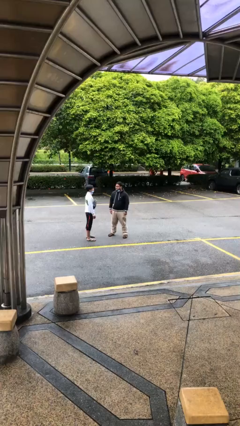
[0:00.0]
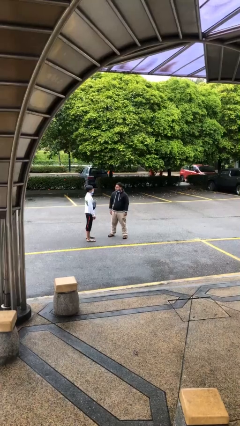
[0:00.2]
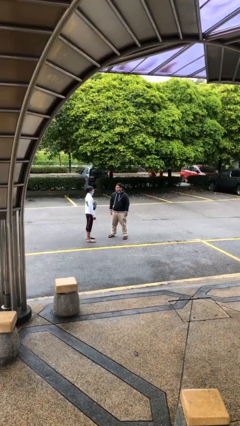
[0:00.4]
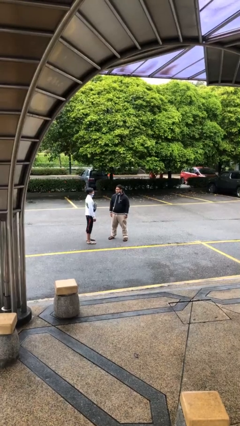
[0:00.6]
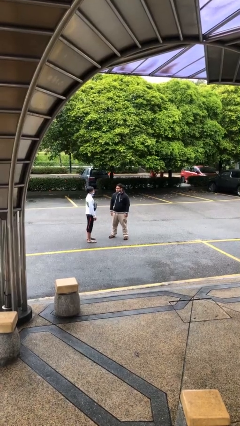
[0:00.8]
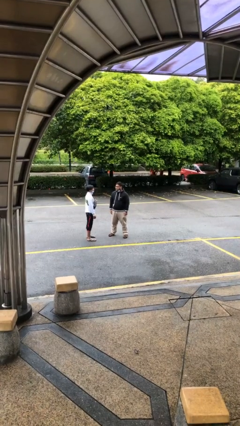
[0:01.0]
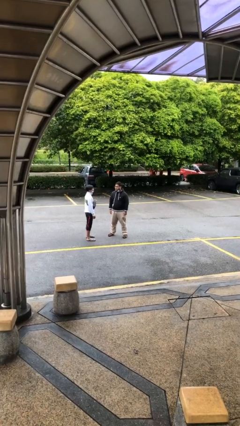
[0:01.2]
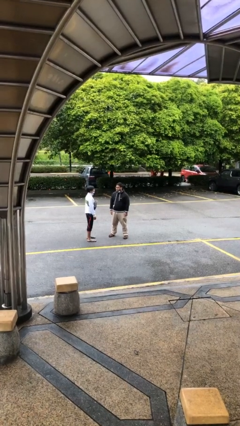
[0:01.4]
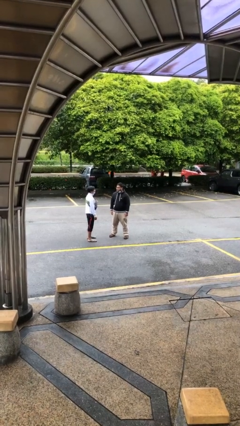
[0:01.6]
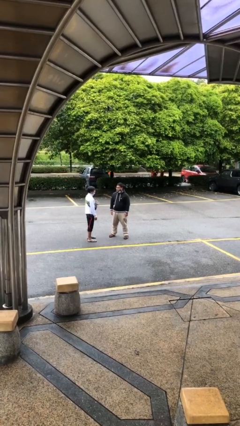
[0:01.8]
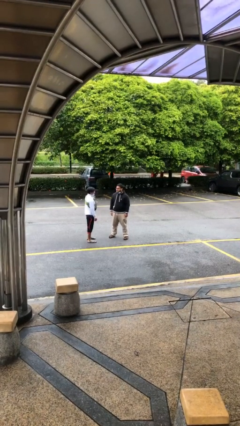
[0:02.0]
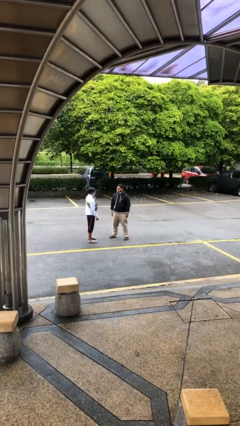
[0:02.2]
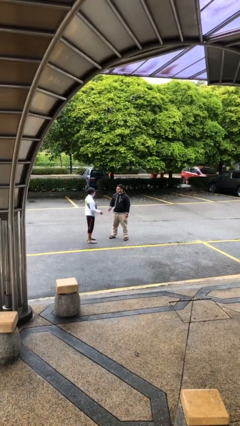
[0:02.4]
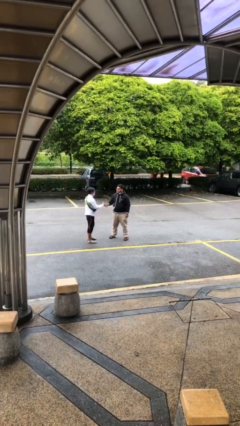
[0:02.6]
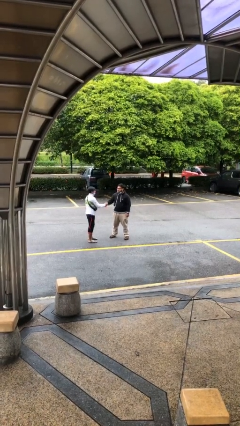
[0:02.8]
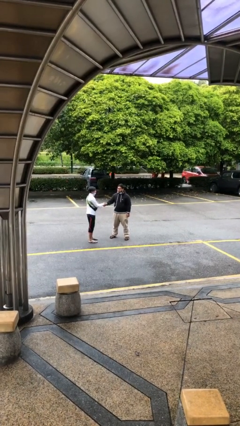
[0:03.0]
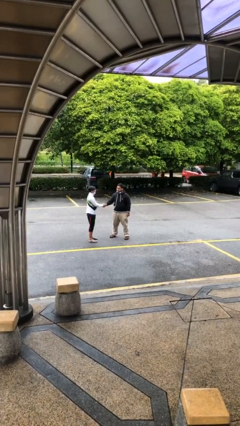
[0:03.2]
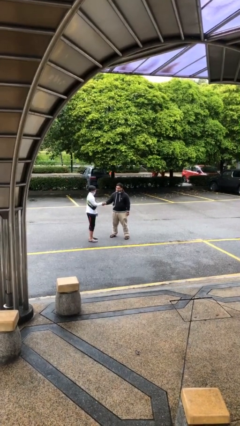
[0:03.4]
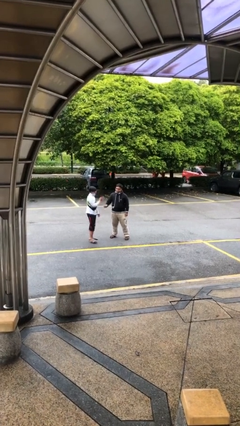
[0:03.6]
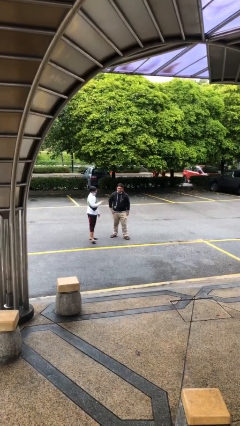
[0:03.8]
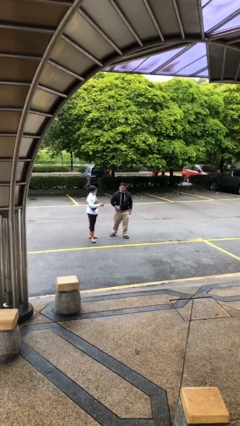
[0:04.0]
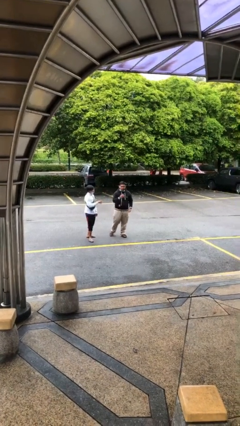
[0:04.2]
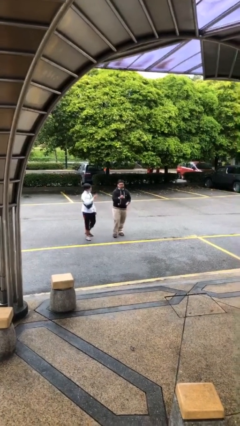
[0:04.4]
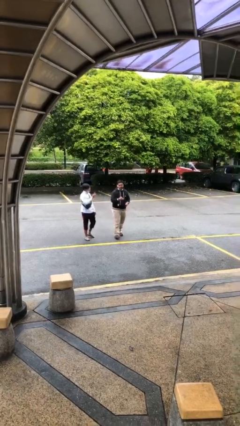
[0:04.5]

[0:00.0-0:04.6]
person shakes hand

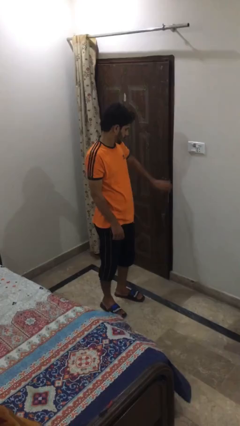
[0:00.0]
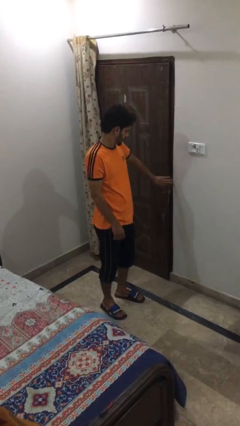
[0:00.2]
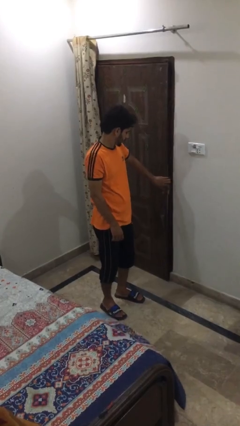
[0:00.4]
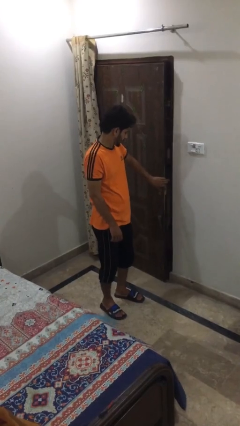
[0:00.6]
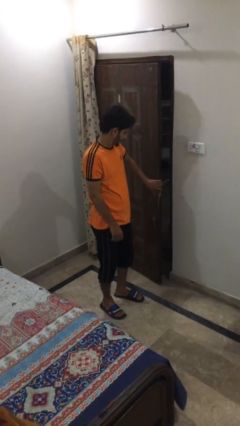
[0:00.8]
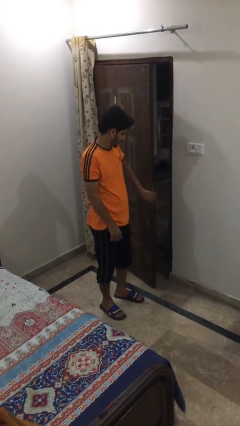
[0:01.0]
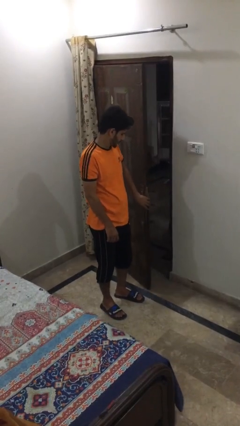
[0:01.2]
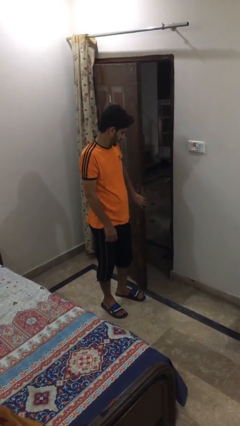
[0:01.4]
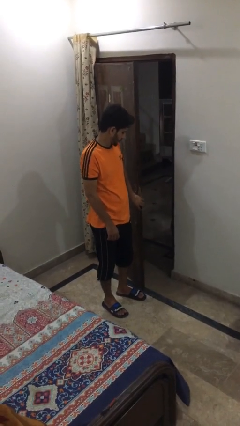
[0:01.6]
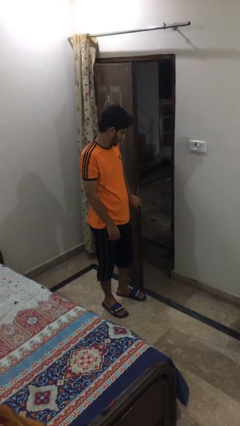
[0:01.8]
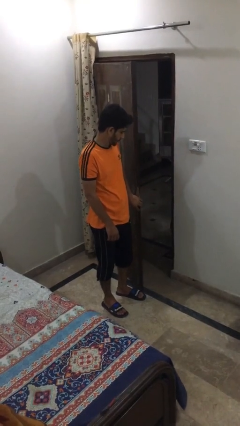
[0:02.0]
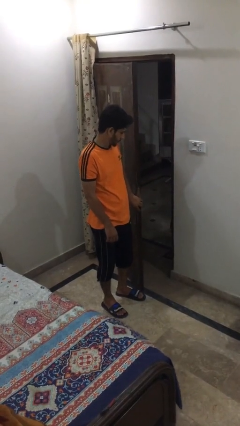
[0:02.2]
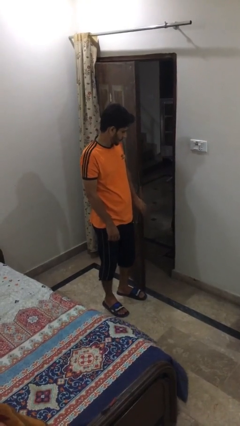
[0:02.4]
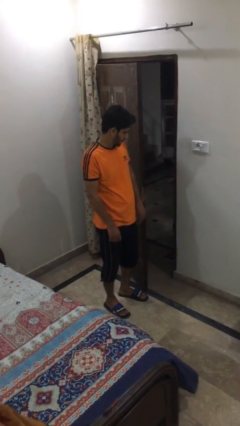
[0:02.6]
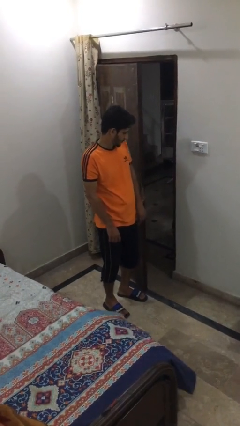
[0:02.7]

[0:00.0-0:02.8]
person opens facility door

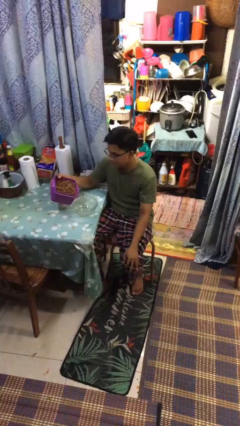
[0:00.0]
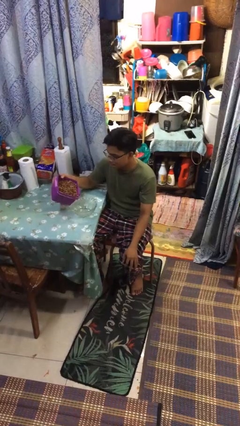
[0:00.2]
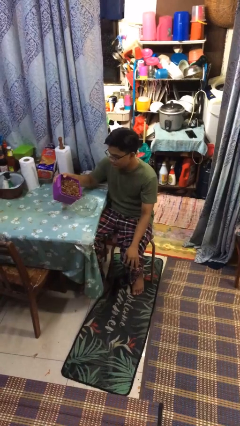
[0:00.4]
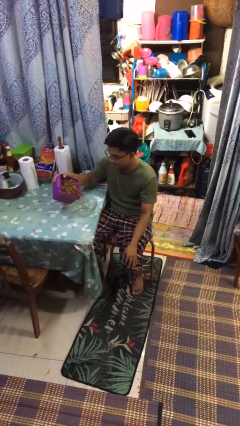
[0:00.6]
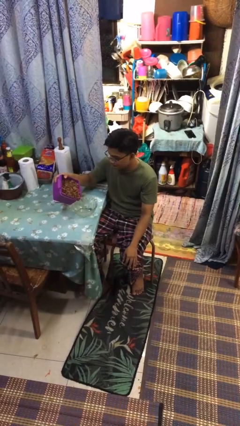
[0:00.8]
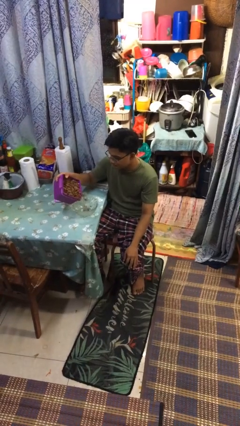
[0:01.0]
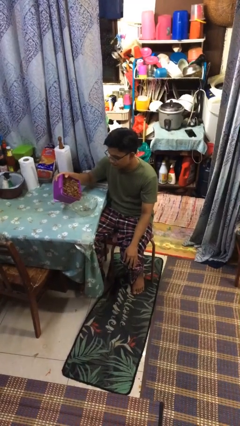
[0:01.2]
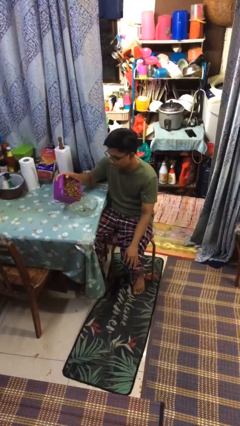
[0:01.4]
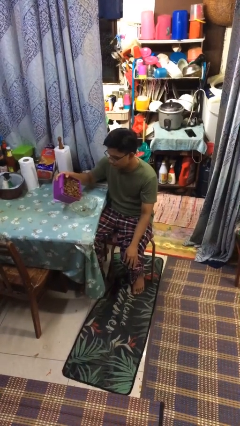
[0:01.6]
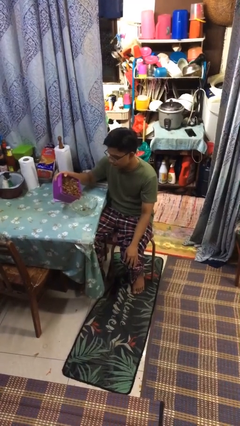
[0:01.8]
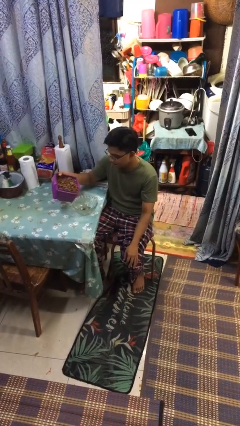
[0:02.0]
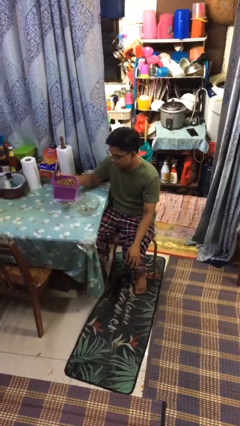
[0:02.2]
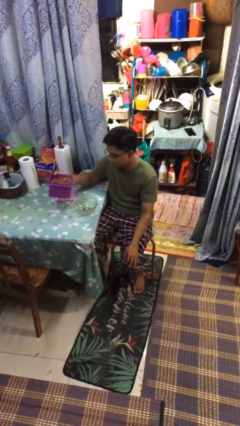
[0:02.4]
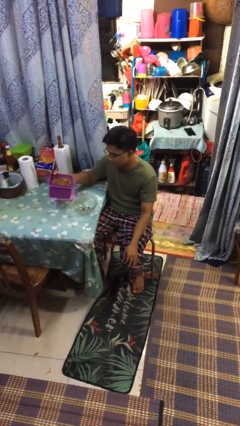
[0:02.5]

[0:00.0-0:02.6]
person pours into bowl

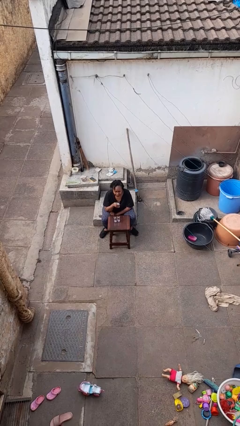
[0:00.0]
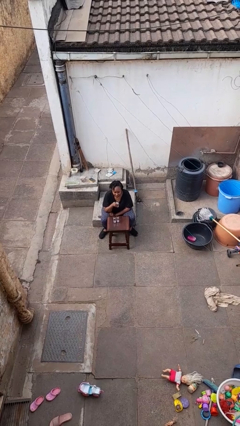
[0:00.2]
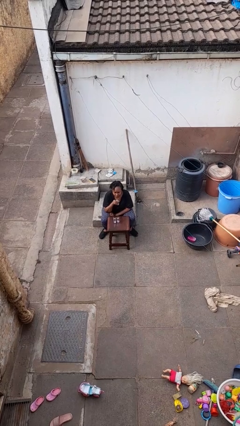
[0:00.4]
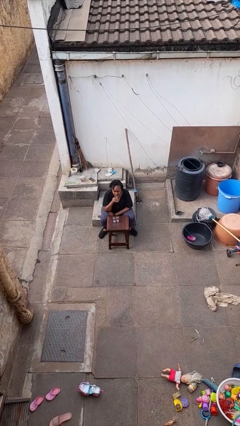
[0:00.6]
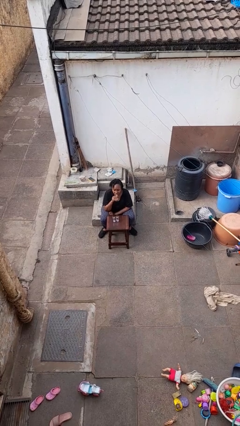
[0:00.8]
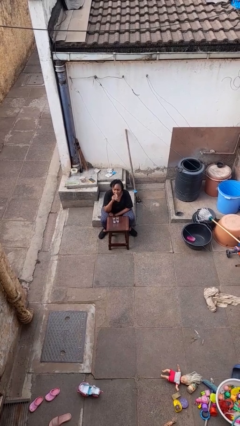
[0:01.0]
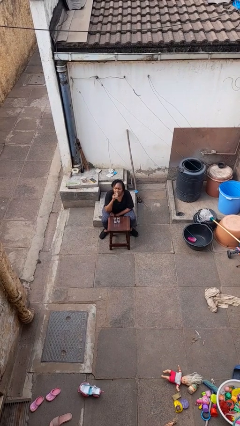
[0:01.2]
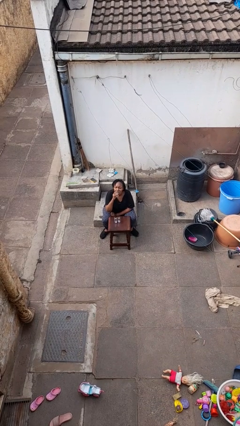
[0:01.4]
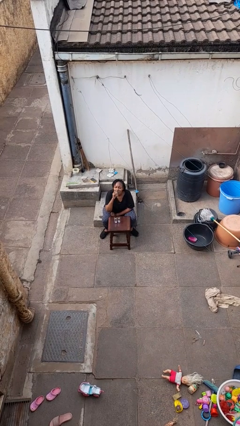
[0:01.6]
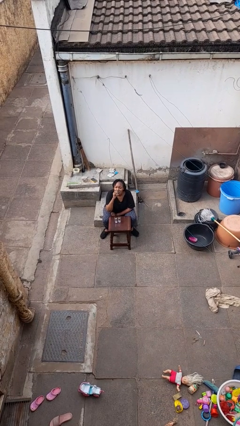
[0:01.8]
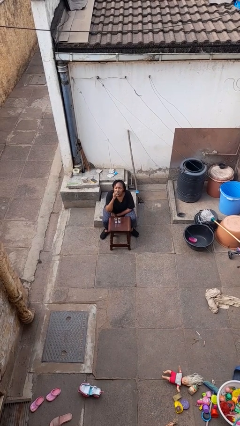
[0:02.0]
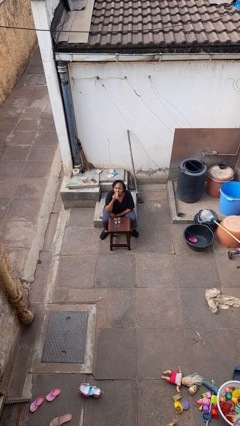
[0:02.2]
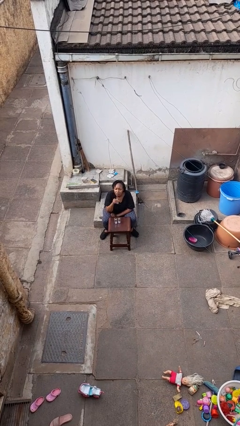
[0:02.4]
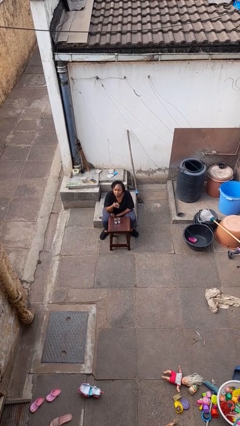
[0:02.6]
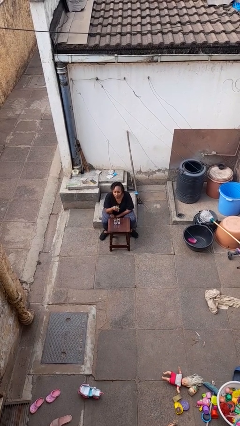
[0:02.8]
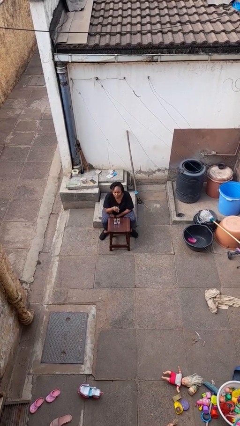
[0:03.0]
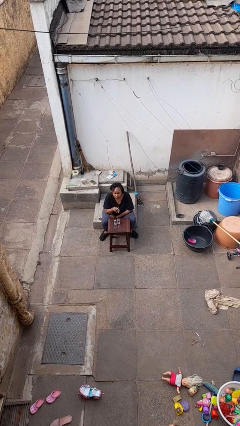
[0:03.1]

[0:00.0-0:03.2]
person drinks from shotglass

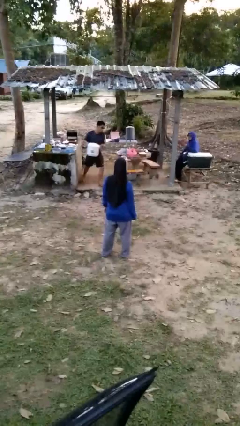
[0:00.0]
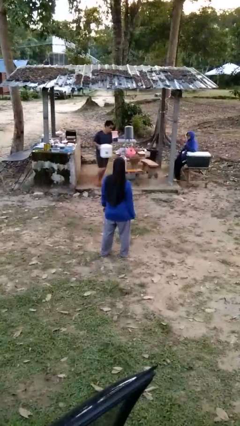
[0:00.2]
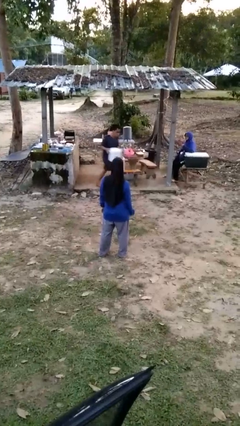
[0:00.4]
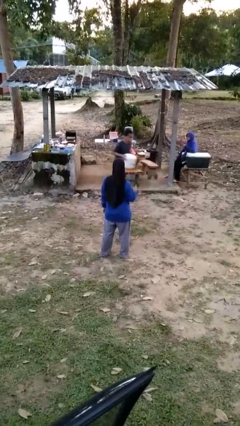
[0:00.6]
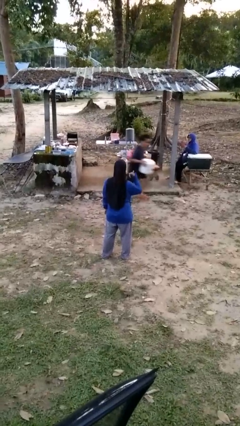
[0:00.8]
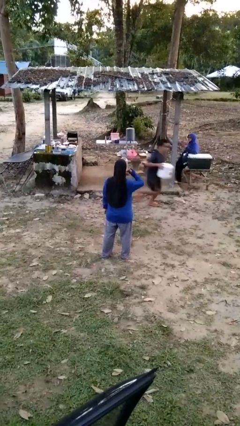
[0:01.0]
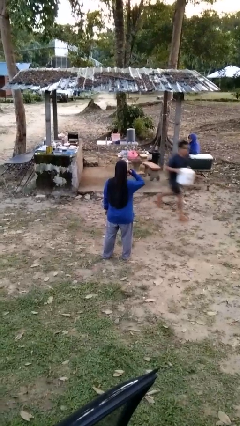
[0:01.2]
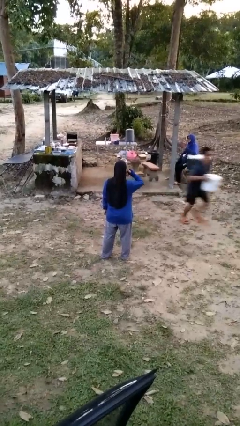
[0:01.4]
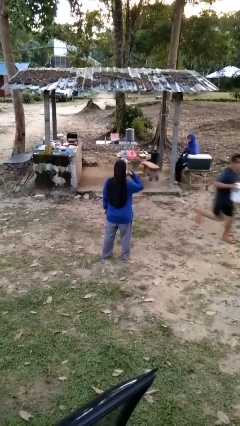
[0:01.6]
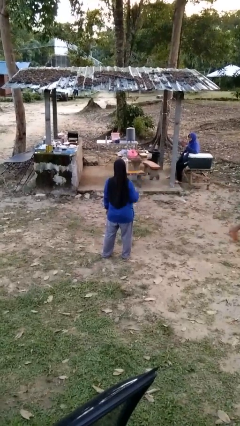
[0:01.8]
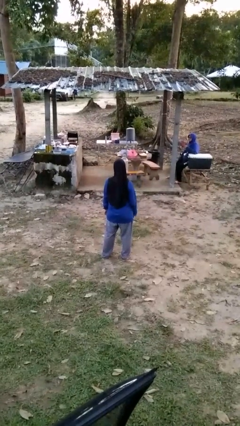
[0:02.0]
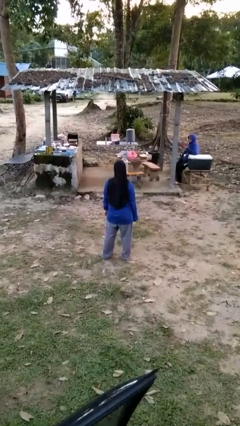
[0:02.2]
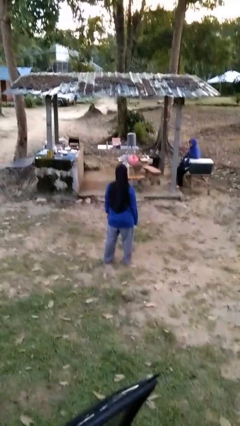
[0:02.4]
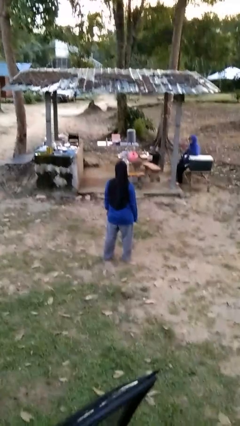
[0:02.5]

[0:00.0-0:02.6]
person gestures call me

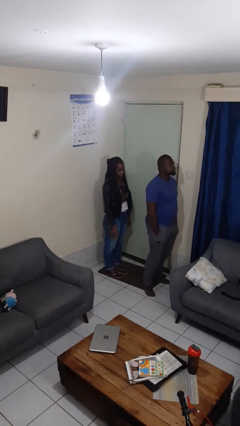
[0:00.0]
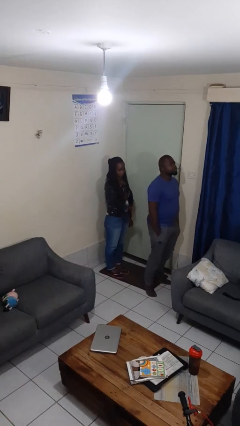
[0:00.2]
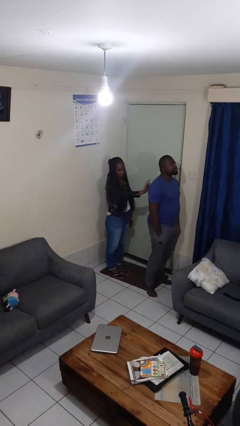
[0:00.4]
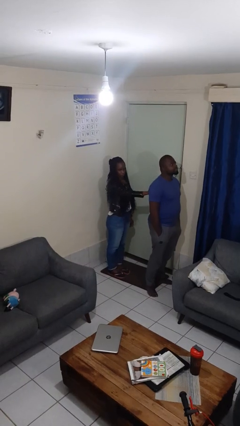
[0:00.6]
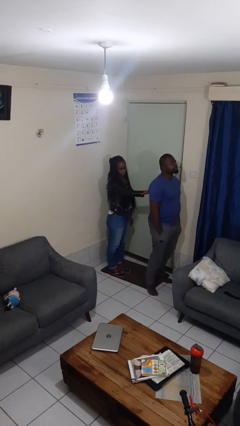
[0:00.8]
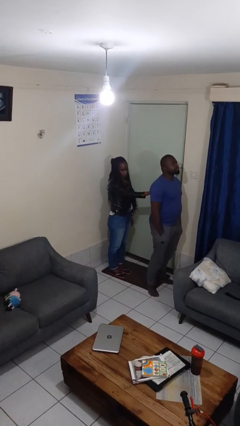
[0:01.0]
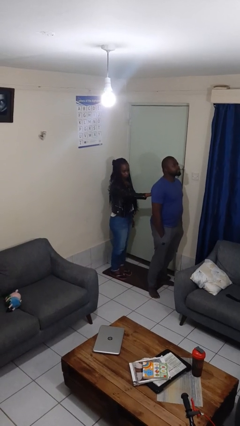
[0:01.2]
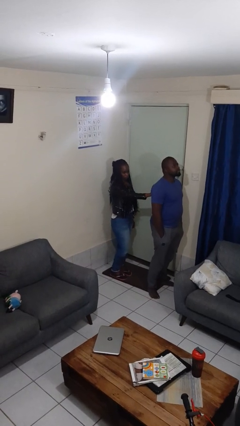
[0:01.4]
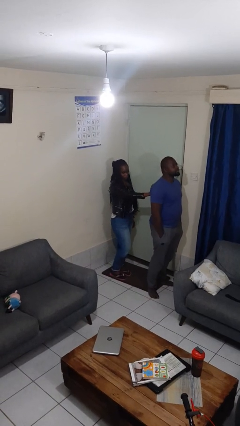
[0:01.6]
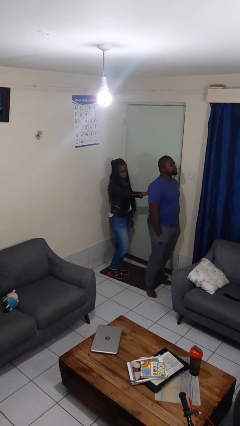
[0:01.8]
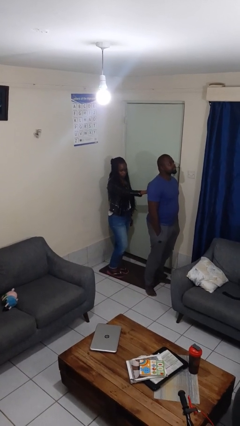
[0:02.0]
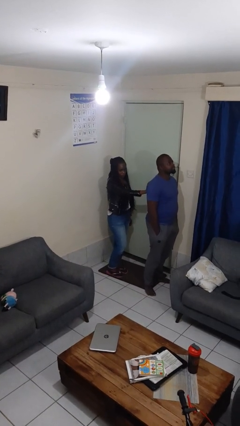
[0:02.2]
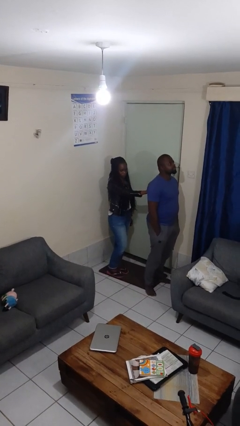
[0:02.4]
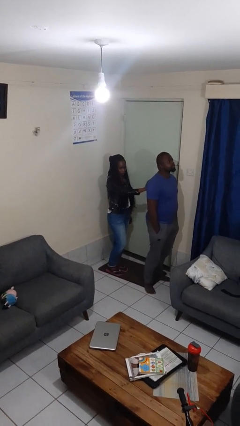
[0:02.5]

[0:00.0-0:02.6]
person touches back of person
